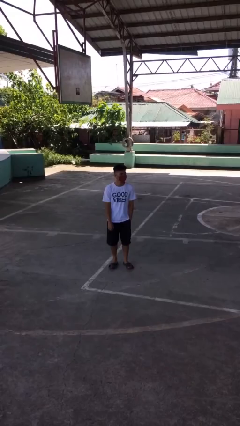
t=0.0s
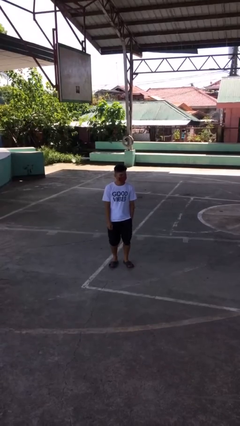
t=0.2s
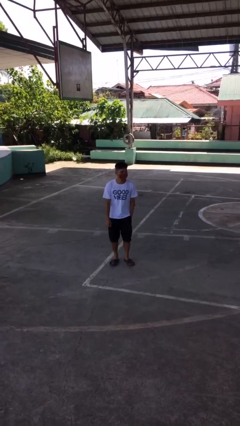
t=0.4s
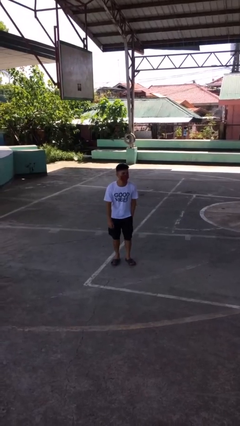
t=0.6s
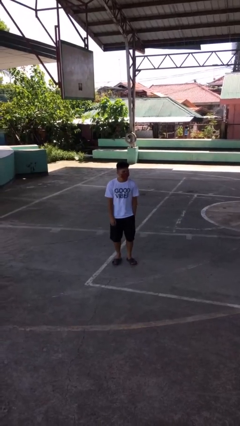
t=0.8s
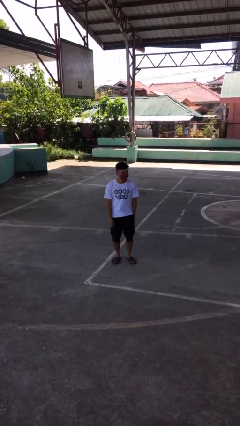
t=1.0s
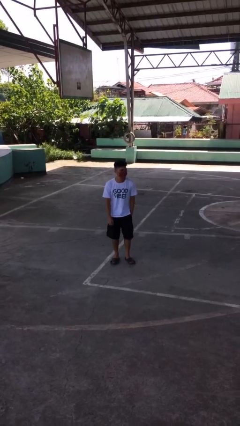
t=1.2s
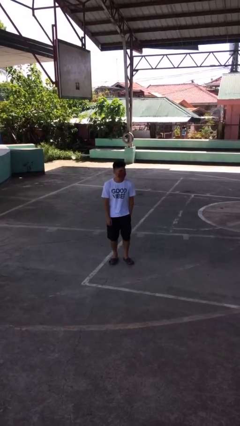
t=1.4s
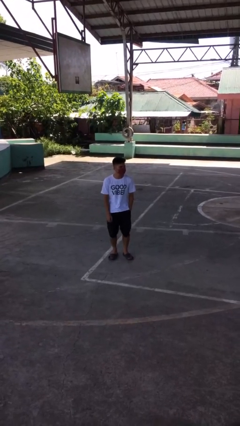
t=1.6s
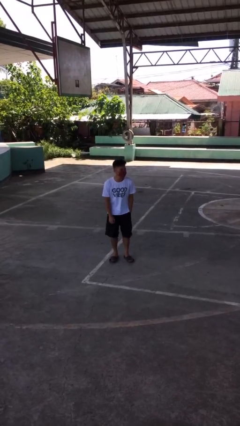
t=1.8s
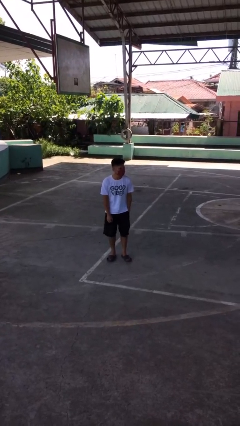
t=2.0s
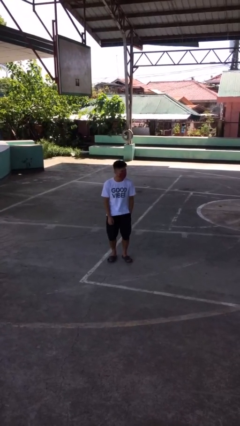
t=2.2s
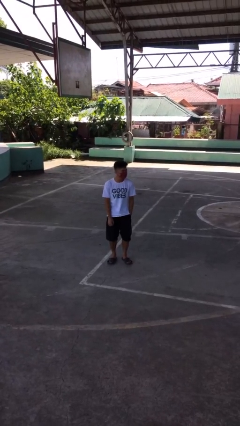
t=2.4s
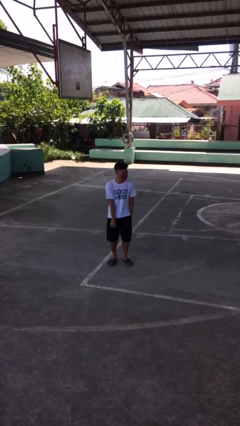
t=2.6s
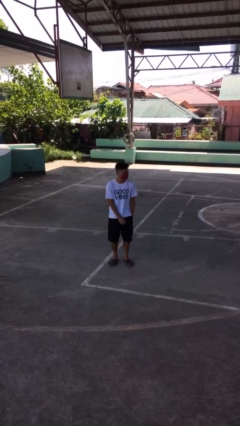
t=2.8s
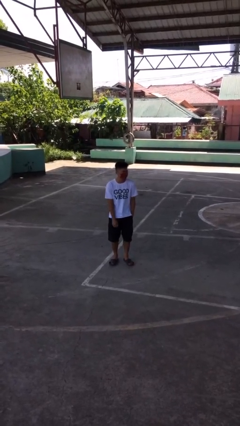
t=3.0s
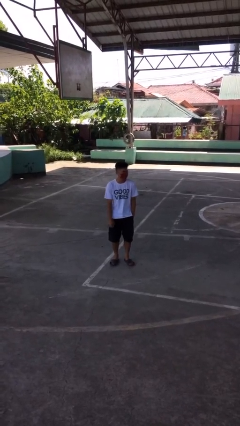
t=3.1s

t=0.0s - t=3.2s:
person wiggles hips

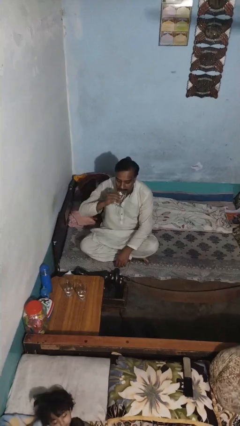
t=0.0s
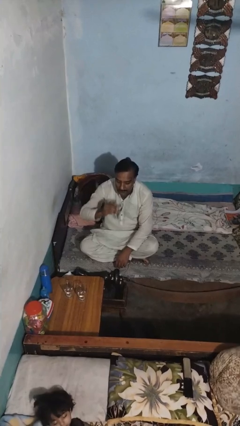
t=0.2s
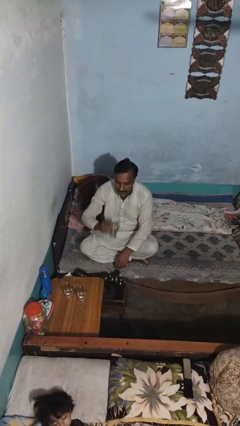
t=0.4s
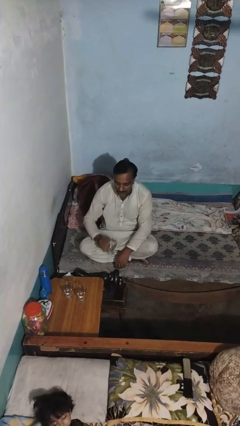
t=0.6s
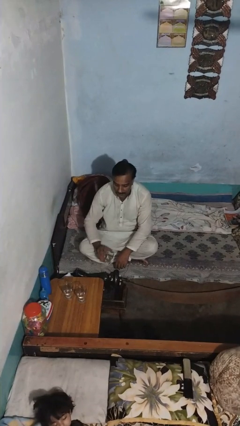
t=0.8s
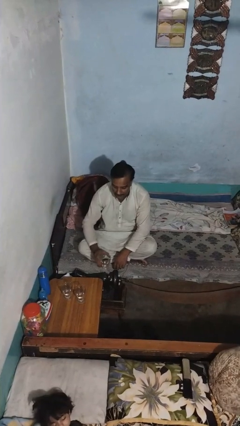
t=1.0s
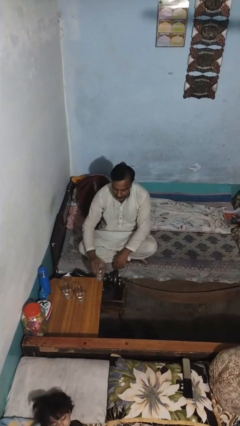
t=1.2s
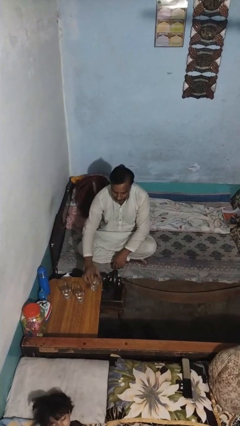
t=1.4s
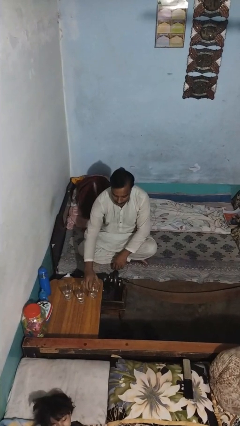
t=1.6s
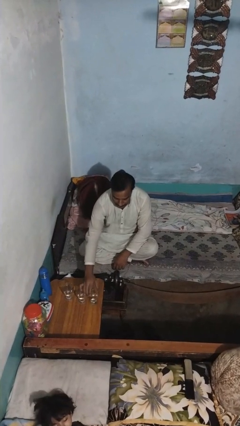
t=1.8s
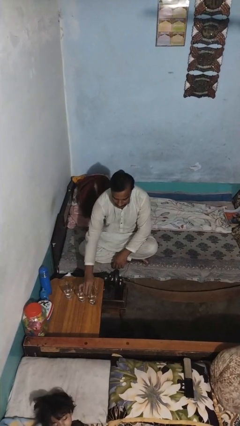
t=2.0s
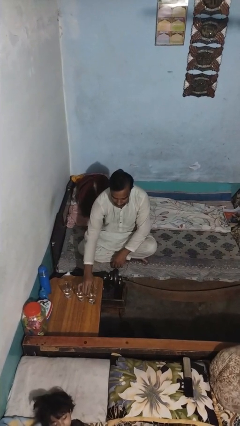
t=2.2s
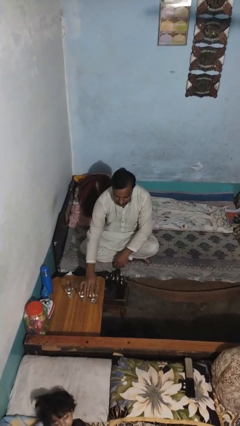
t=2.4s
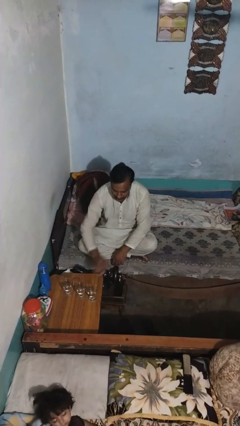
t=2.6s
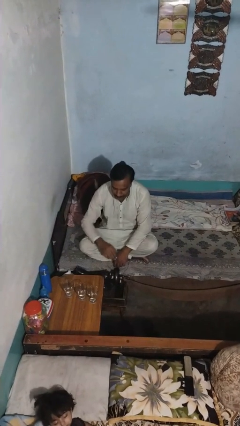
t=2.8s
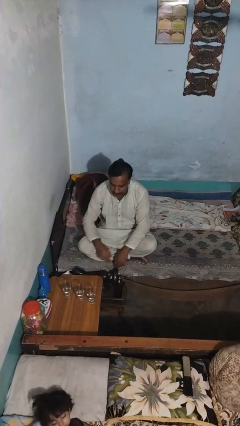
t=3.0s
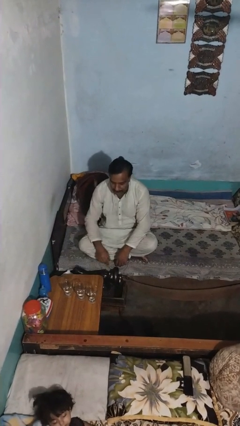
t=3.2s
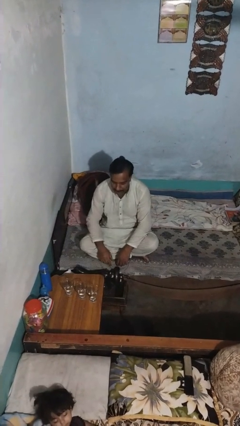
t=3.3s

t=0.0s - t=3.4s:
person puts down object on table

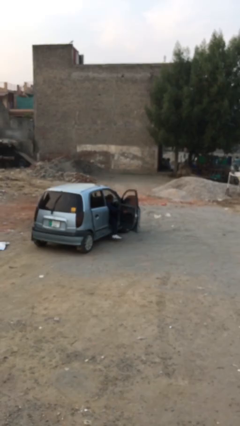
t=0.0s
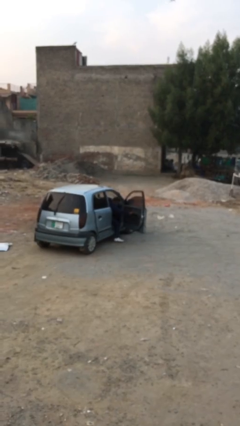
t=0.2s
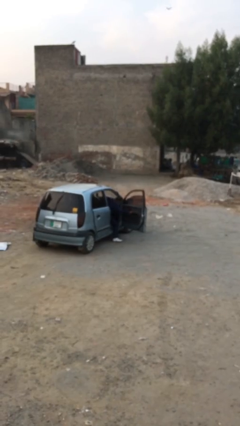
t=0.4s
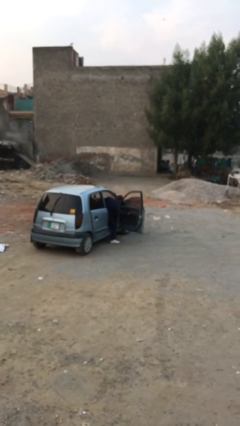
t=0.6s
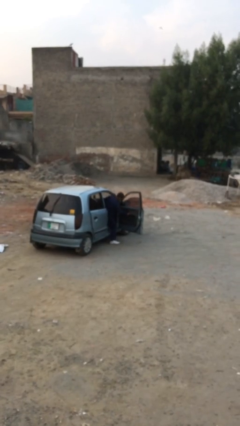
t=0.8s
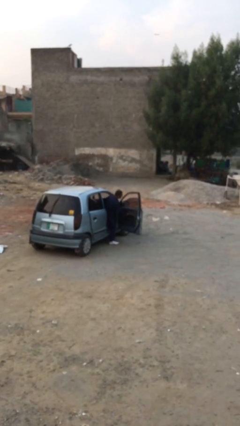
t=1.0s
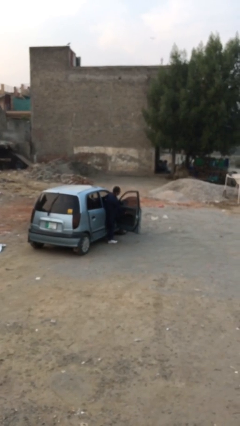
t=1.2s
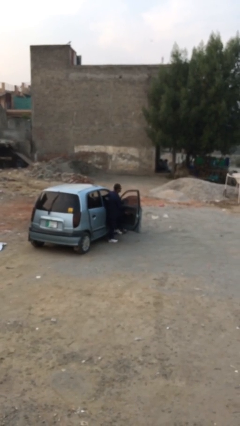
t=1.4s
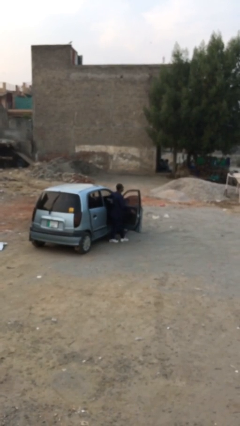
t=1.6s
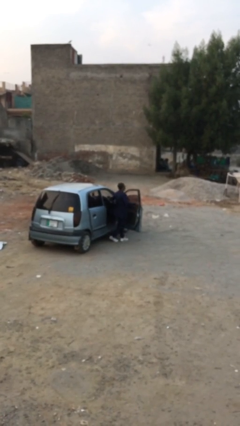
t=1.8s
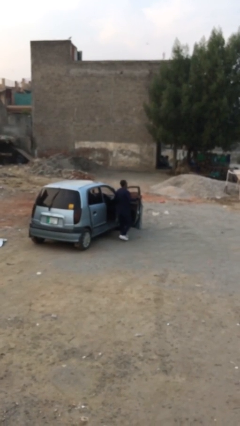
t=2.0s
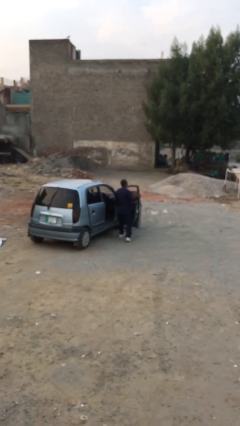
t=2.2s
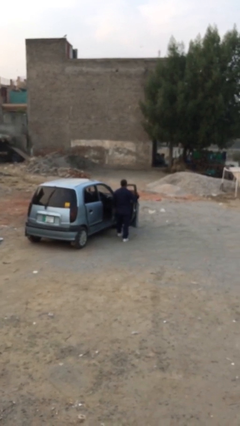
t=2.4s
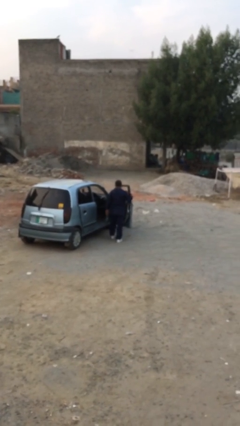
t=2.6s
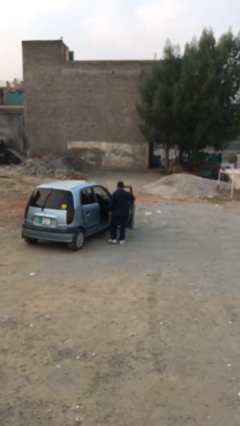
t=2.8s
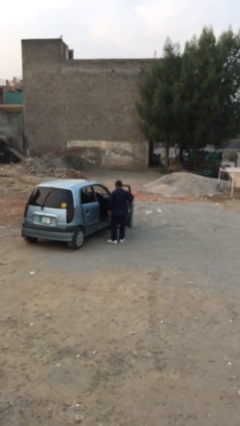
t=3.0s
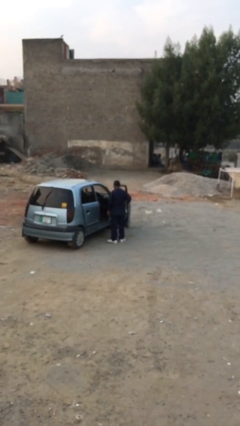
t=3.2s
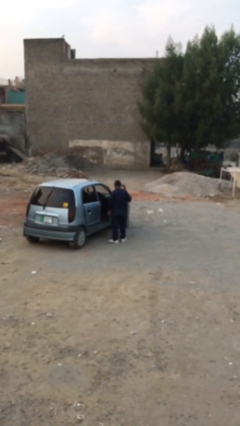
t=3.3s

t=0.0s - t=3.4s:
person exits car

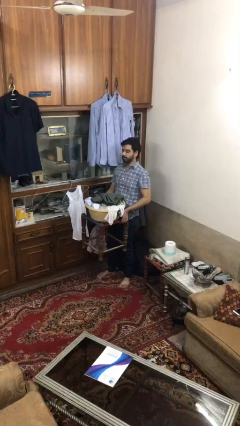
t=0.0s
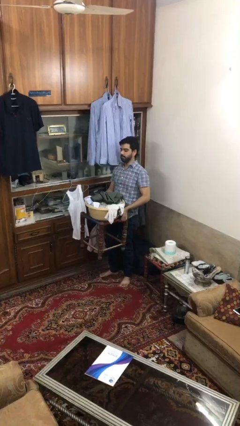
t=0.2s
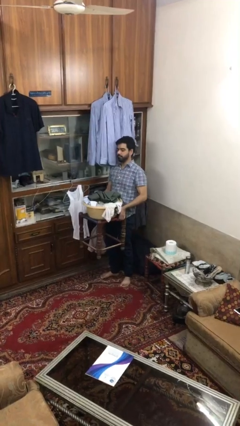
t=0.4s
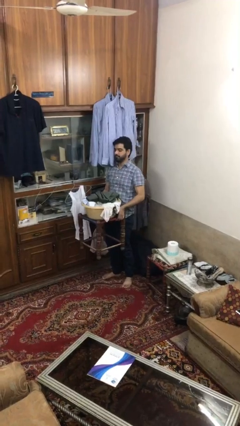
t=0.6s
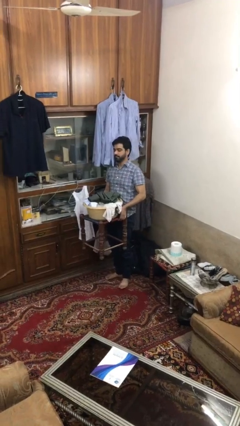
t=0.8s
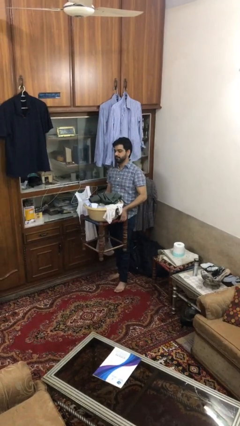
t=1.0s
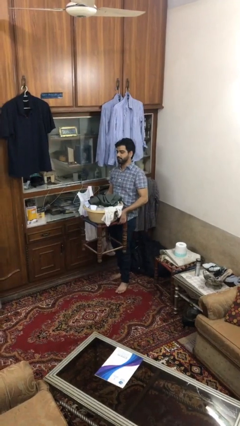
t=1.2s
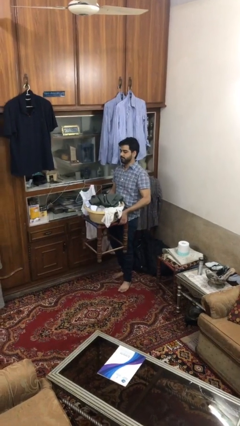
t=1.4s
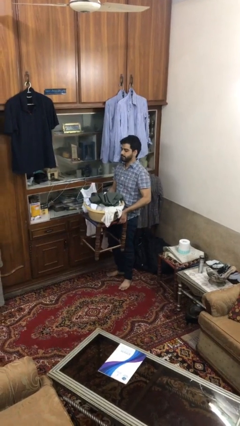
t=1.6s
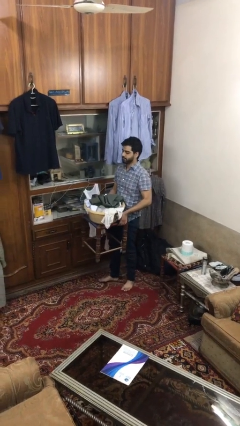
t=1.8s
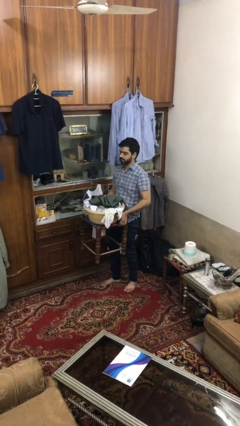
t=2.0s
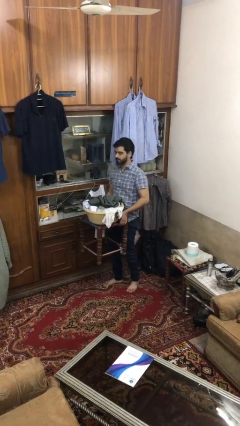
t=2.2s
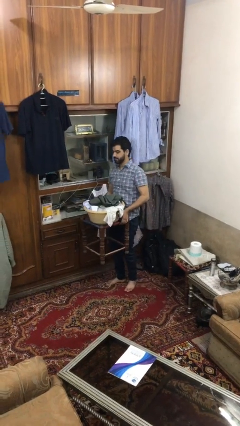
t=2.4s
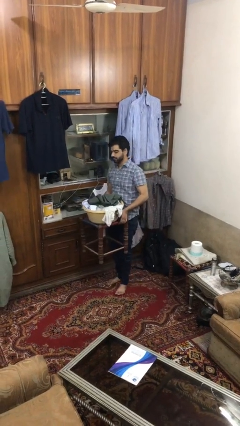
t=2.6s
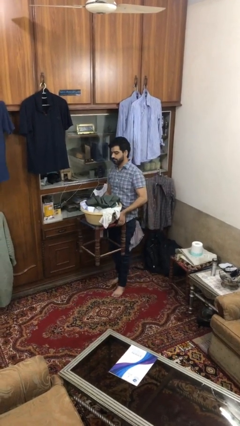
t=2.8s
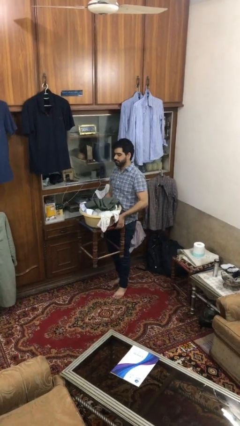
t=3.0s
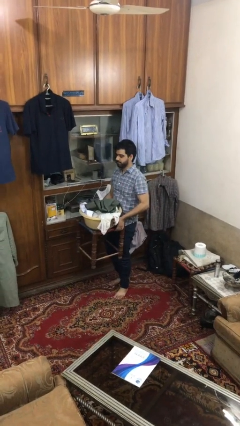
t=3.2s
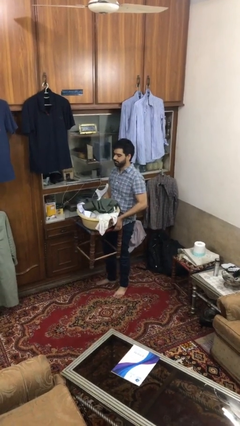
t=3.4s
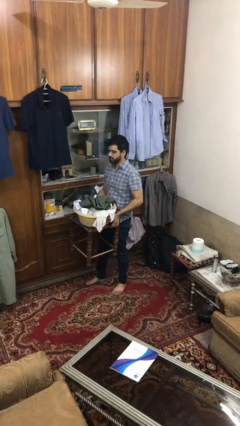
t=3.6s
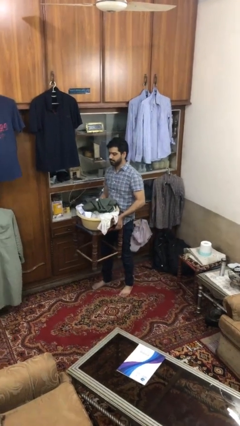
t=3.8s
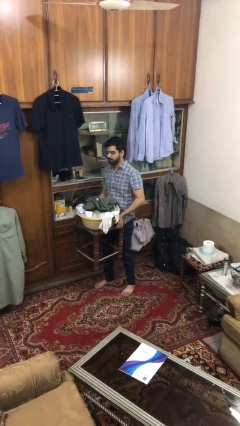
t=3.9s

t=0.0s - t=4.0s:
person carries heavy object

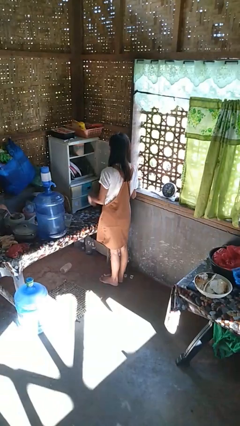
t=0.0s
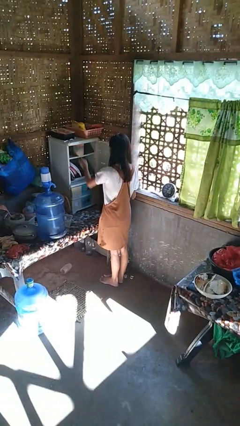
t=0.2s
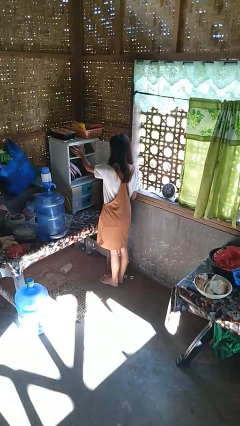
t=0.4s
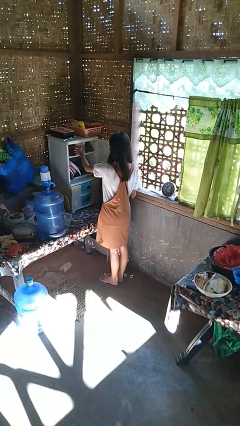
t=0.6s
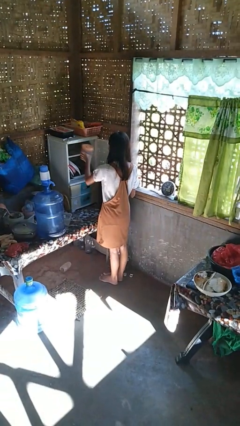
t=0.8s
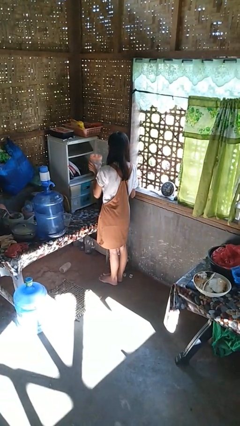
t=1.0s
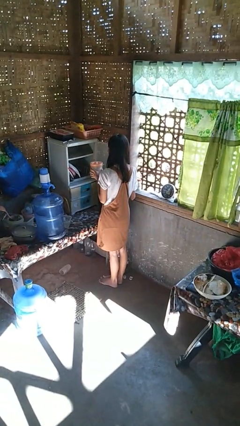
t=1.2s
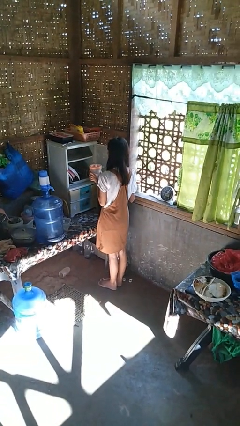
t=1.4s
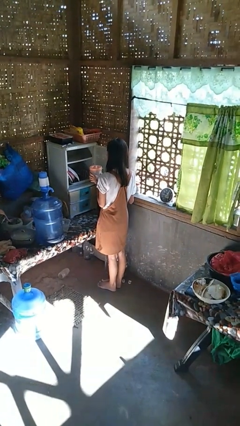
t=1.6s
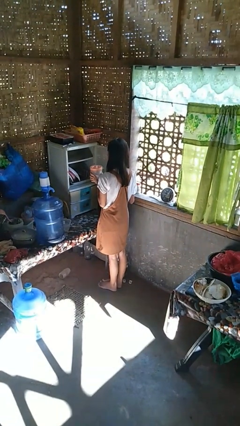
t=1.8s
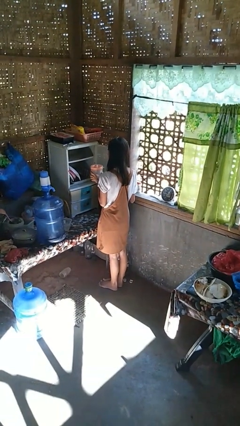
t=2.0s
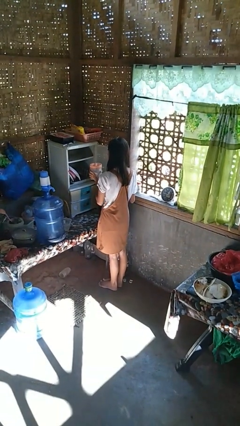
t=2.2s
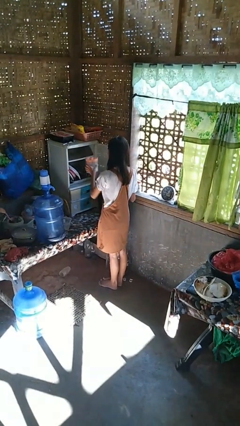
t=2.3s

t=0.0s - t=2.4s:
person picks up object from cabinet

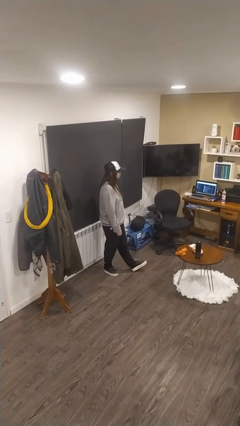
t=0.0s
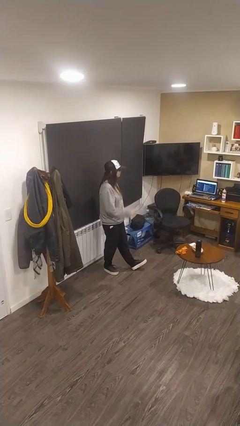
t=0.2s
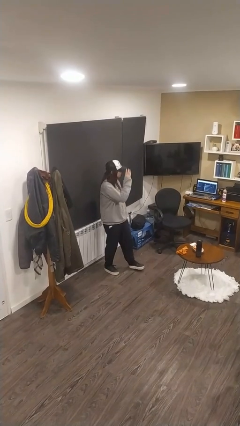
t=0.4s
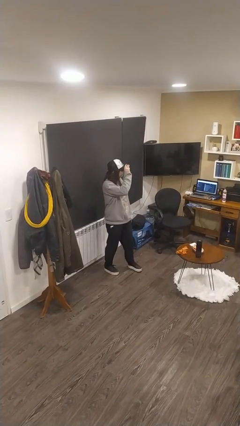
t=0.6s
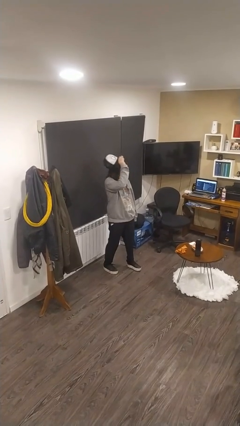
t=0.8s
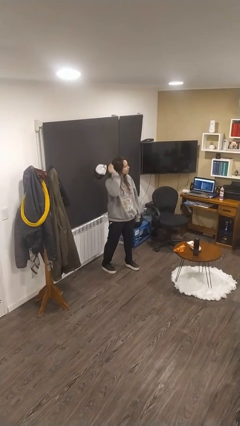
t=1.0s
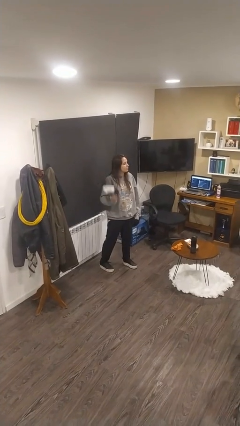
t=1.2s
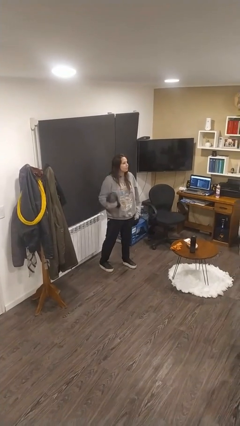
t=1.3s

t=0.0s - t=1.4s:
person takes off hat
